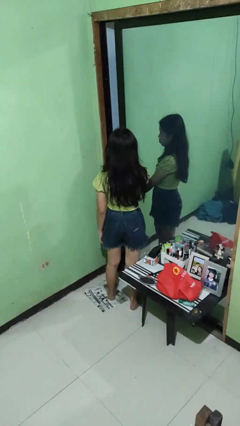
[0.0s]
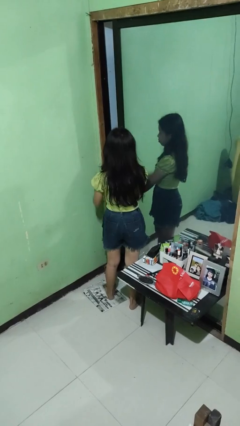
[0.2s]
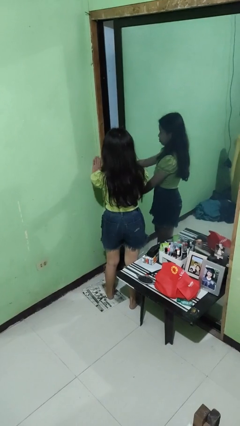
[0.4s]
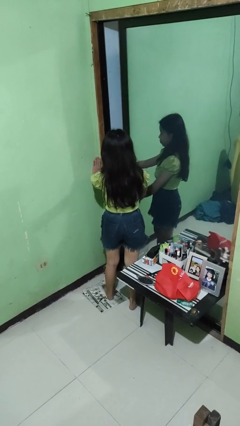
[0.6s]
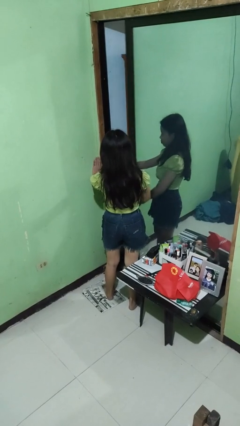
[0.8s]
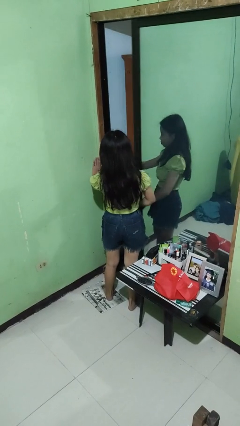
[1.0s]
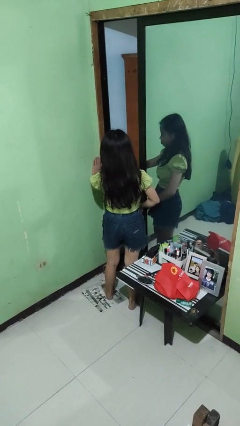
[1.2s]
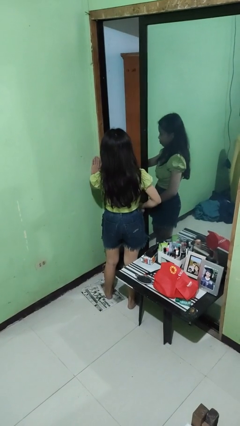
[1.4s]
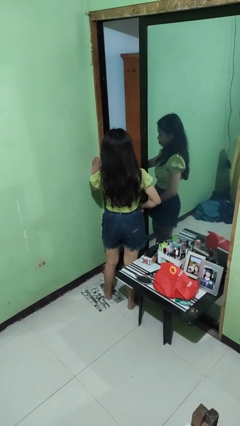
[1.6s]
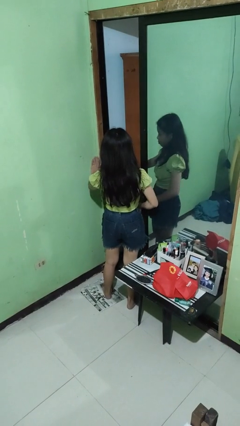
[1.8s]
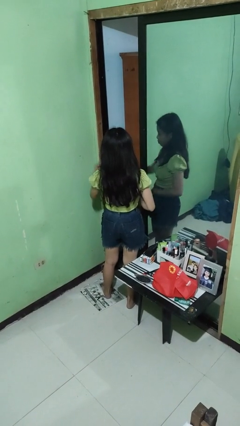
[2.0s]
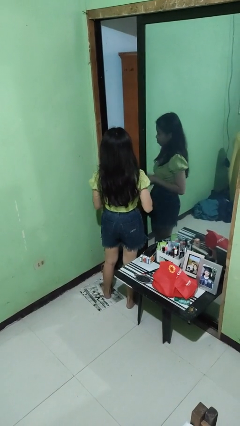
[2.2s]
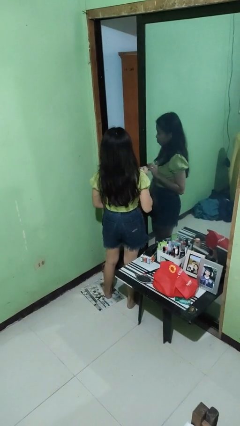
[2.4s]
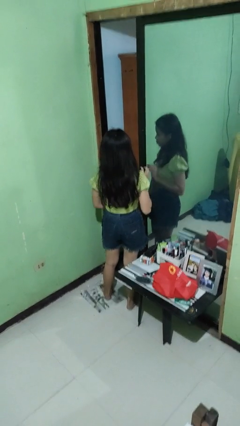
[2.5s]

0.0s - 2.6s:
person opens sliding door

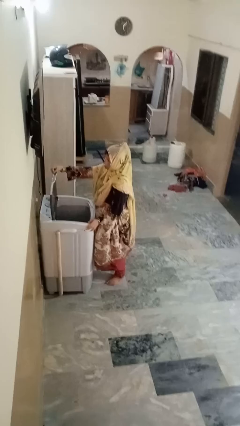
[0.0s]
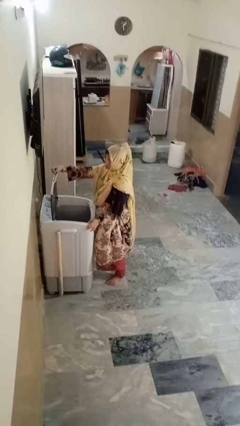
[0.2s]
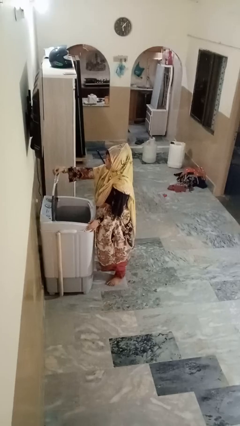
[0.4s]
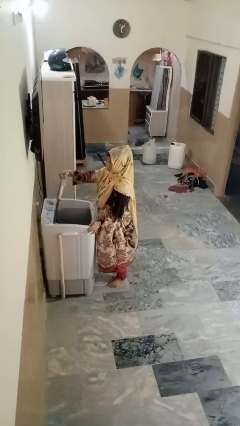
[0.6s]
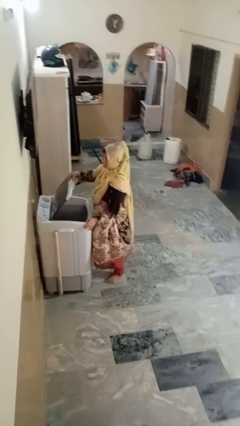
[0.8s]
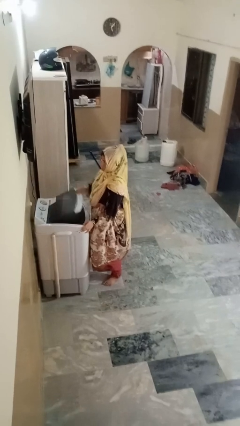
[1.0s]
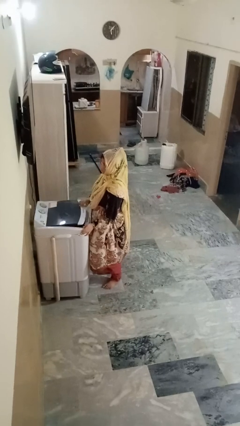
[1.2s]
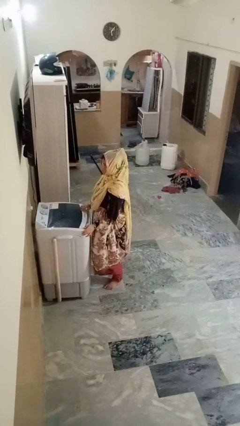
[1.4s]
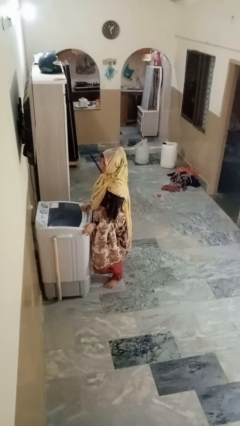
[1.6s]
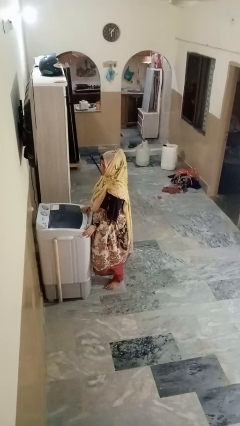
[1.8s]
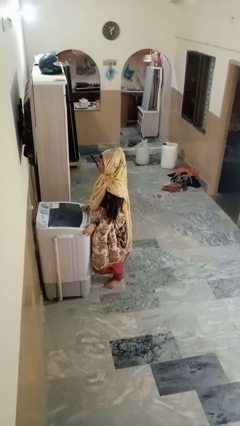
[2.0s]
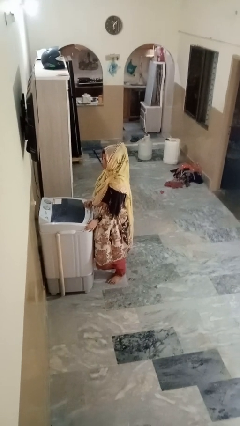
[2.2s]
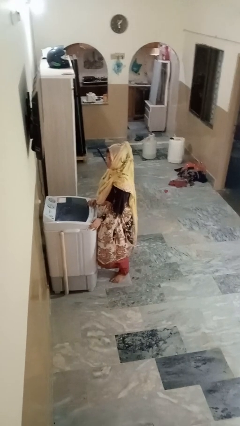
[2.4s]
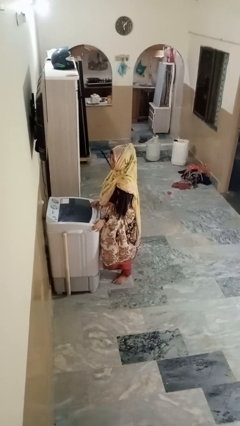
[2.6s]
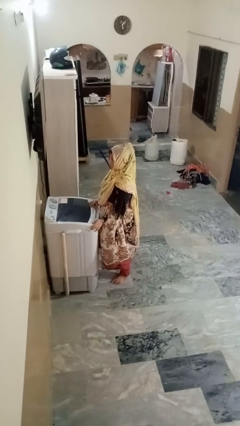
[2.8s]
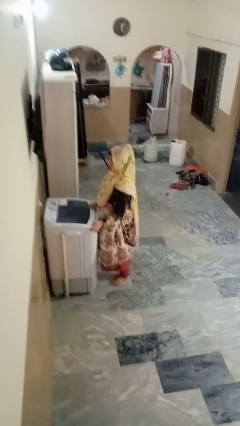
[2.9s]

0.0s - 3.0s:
person opens clothes washer

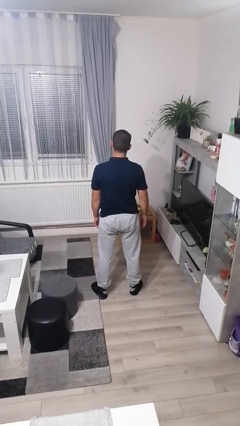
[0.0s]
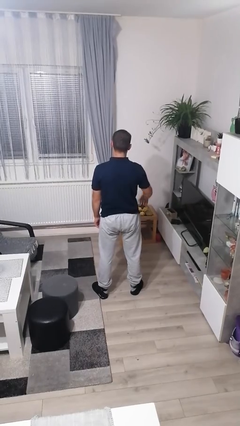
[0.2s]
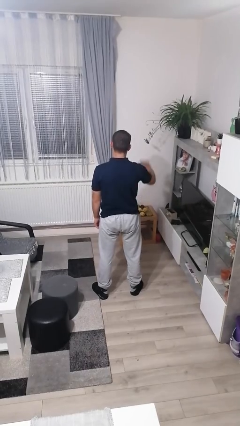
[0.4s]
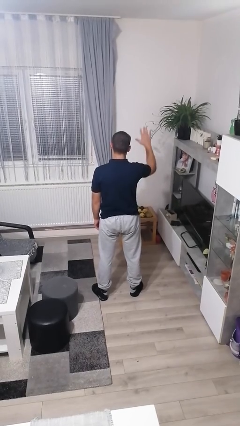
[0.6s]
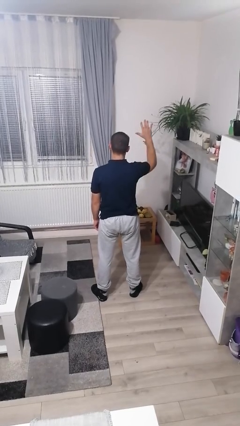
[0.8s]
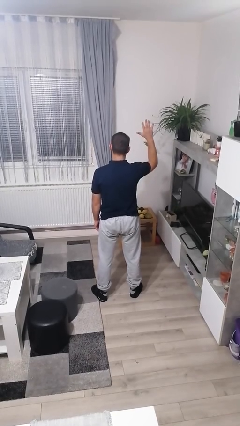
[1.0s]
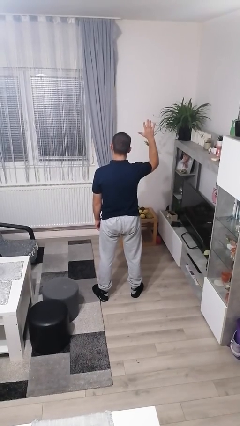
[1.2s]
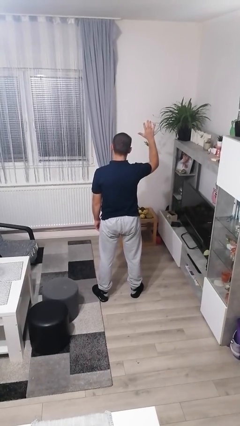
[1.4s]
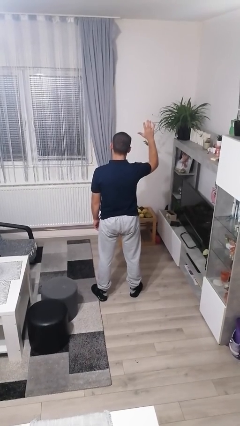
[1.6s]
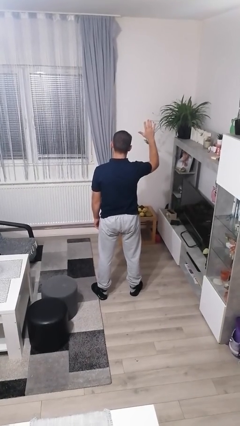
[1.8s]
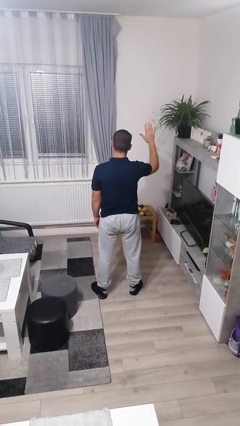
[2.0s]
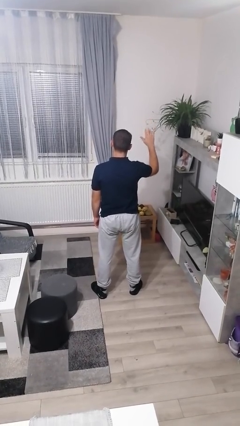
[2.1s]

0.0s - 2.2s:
person gestures number five

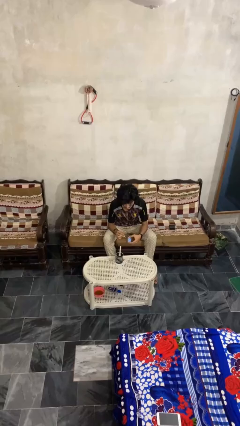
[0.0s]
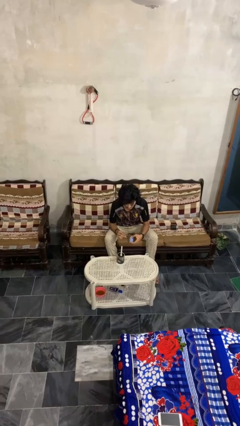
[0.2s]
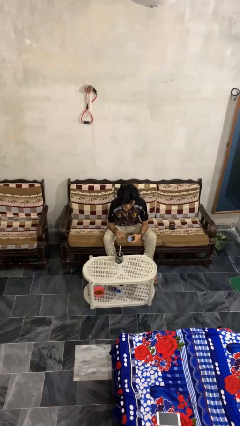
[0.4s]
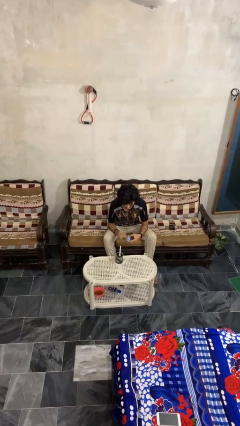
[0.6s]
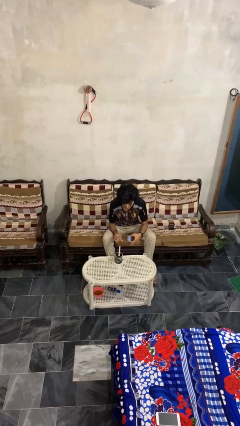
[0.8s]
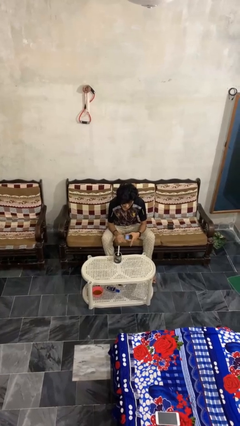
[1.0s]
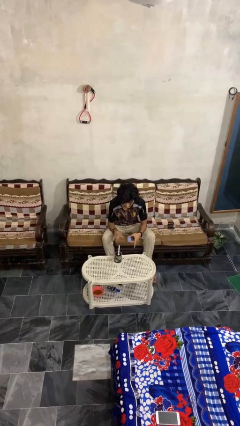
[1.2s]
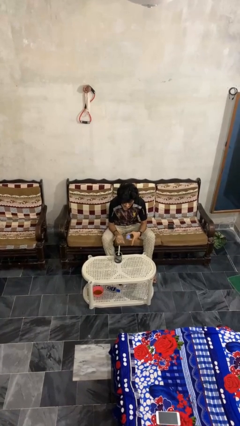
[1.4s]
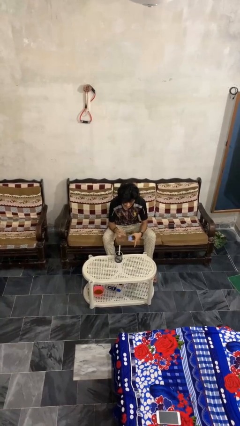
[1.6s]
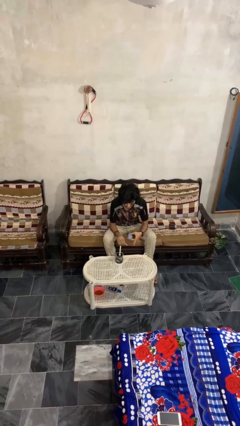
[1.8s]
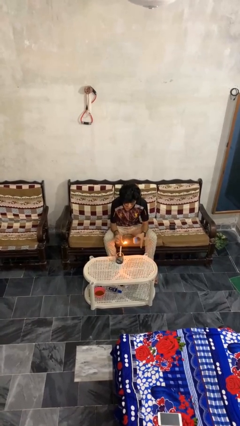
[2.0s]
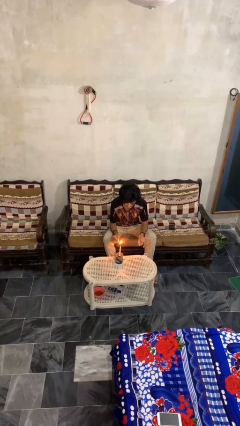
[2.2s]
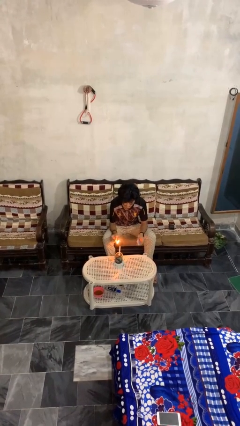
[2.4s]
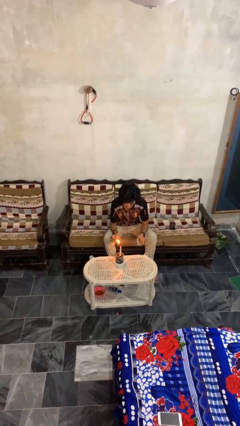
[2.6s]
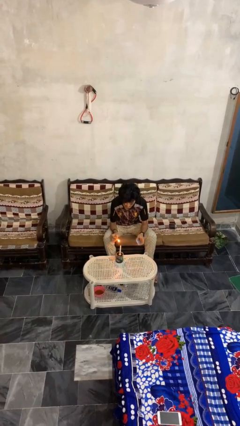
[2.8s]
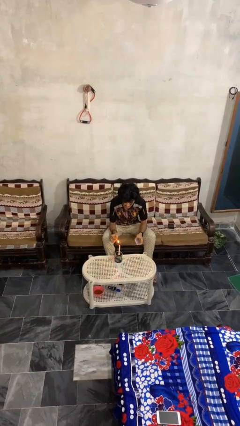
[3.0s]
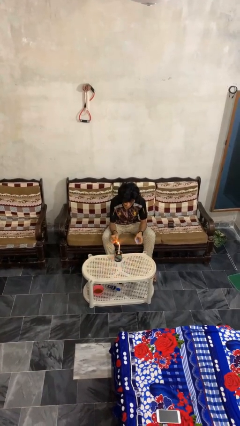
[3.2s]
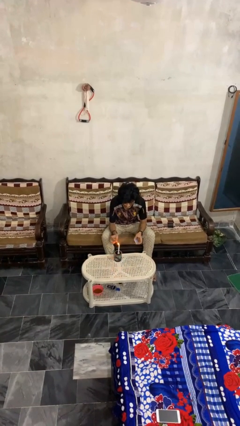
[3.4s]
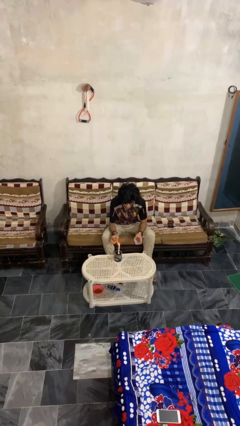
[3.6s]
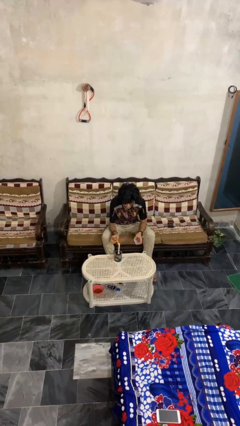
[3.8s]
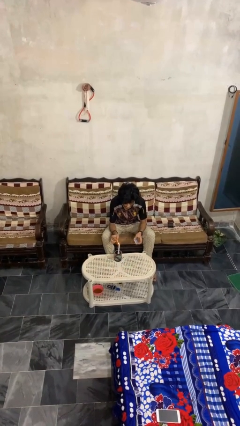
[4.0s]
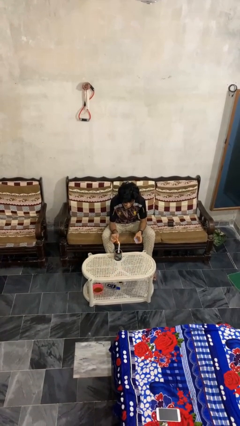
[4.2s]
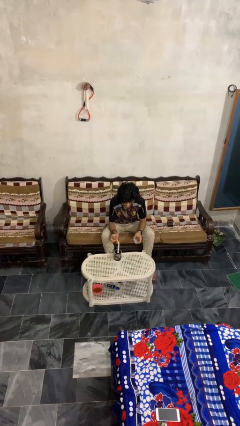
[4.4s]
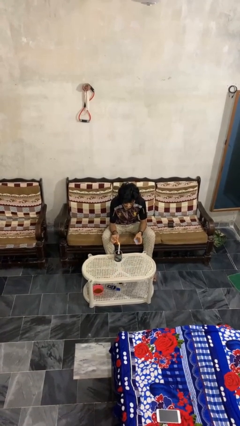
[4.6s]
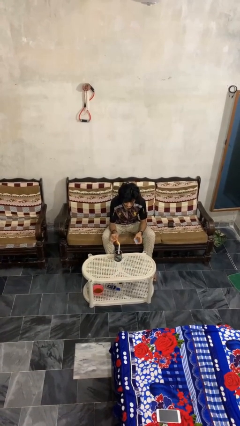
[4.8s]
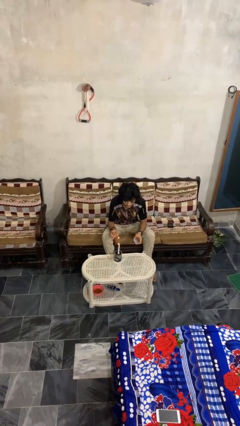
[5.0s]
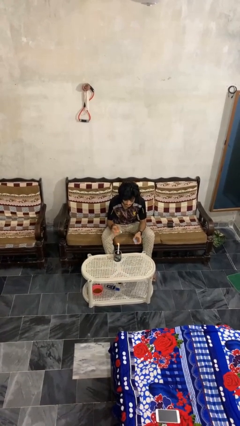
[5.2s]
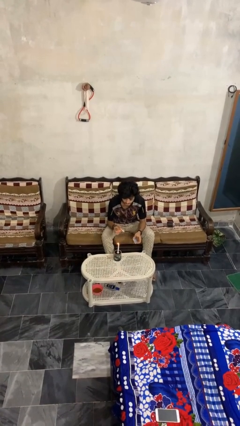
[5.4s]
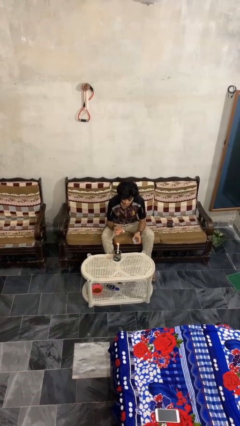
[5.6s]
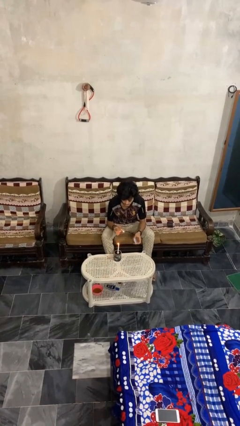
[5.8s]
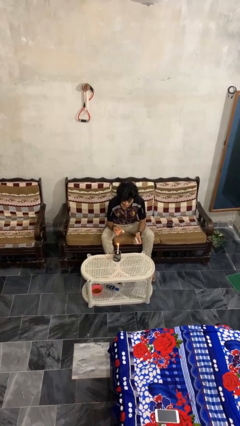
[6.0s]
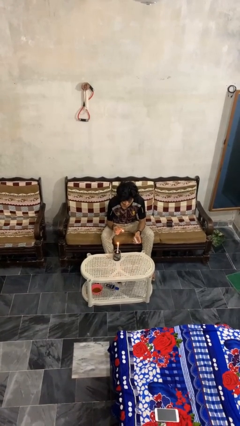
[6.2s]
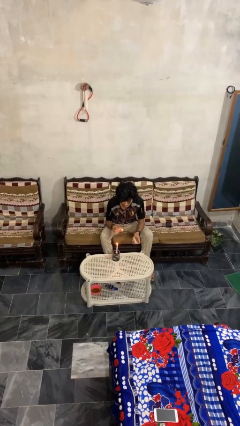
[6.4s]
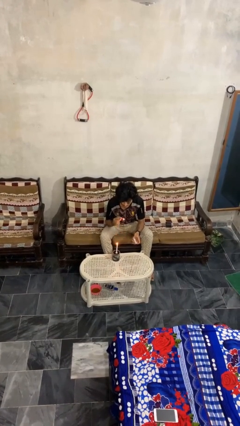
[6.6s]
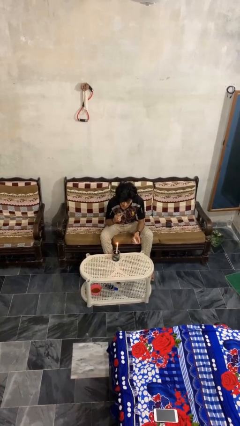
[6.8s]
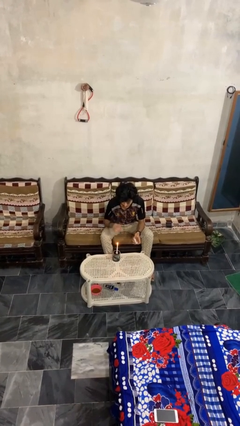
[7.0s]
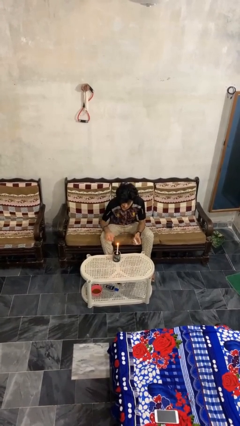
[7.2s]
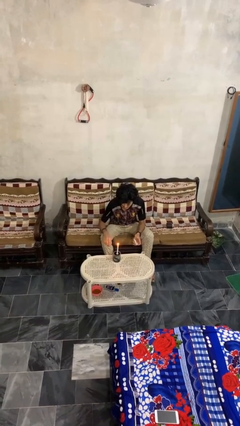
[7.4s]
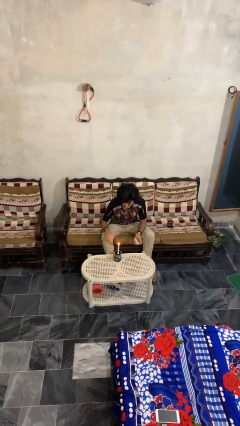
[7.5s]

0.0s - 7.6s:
person lights candle

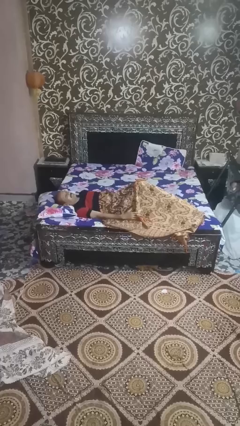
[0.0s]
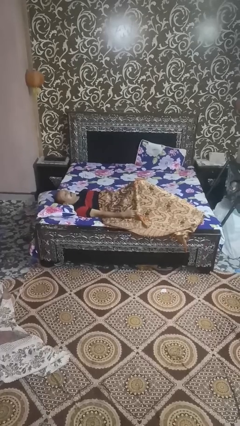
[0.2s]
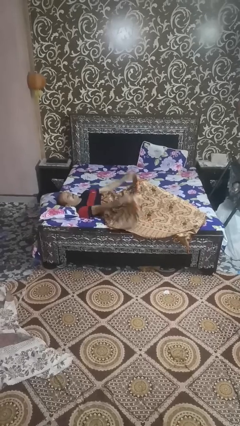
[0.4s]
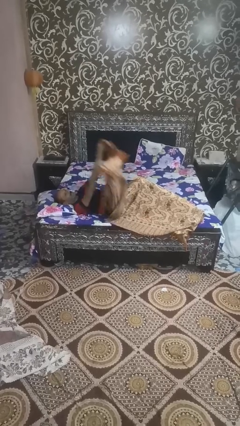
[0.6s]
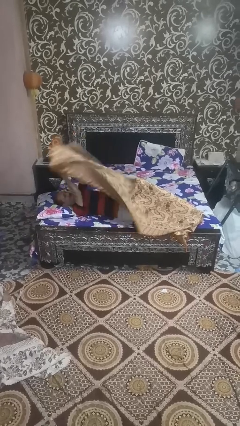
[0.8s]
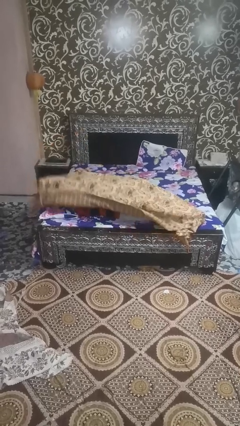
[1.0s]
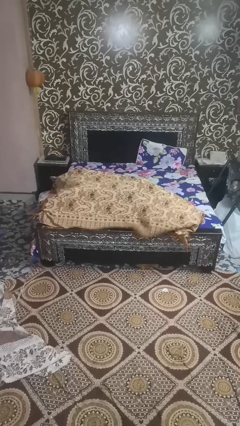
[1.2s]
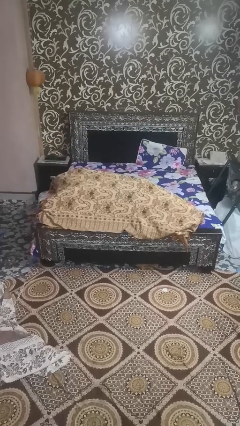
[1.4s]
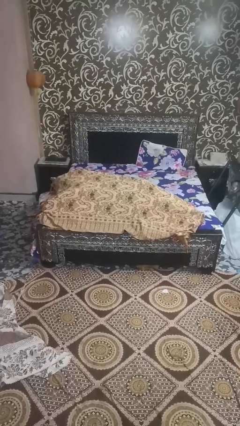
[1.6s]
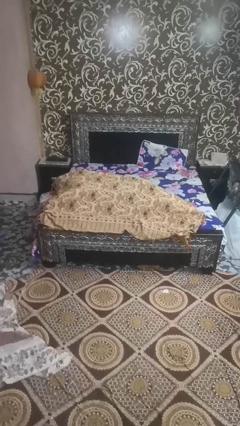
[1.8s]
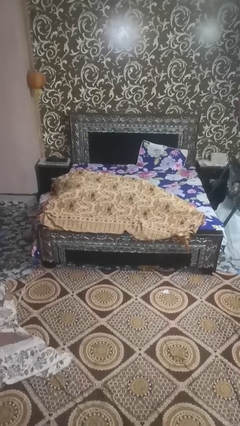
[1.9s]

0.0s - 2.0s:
person covers with blanket
